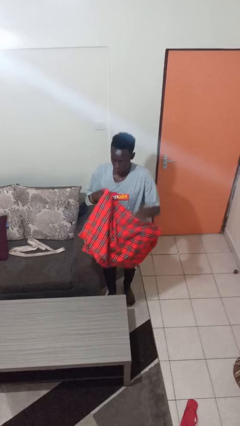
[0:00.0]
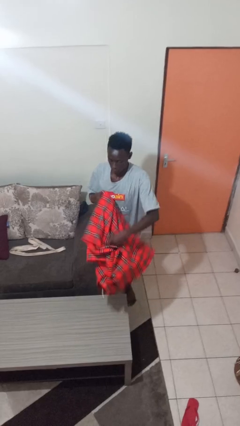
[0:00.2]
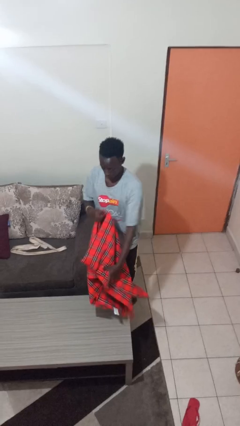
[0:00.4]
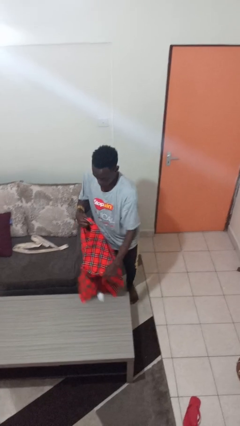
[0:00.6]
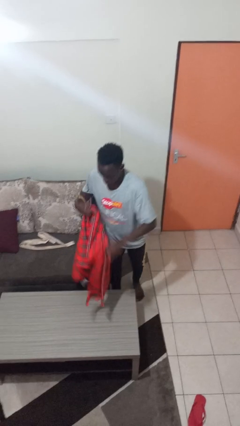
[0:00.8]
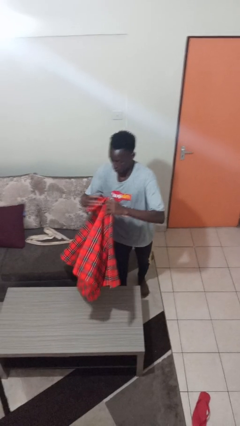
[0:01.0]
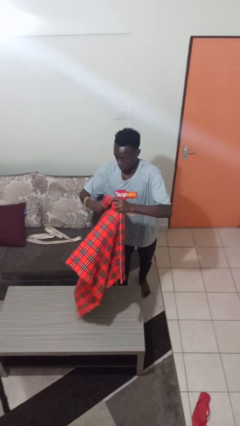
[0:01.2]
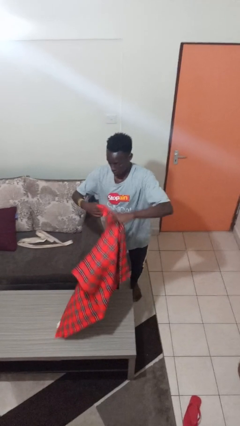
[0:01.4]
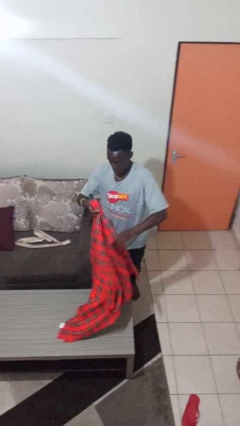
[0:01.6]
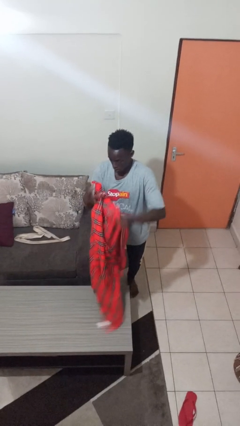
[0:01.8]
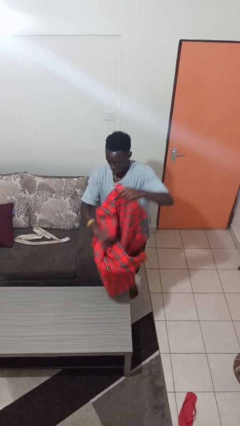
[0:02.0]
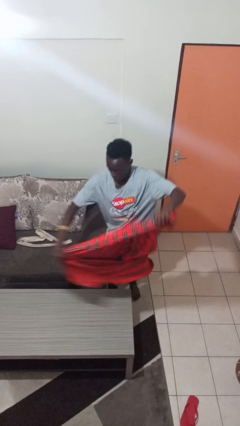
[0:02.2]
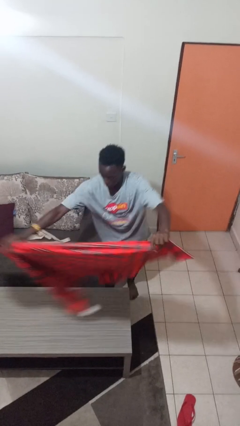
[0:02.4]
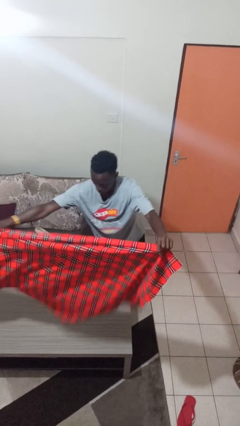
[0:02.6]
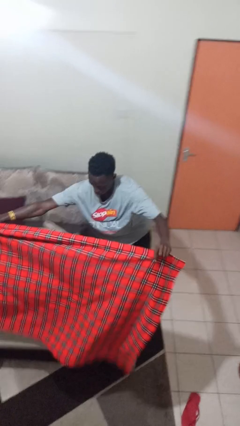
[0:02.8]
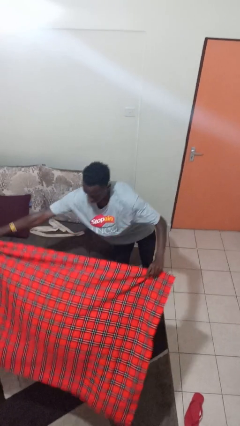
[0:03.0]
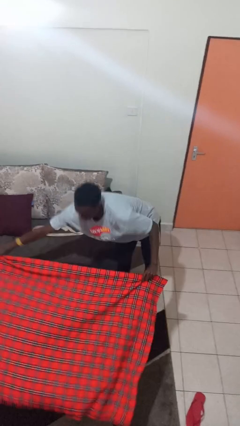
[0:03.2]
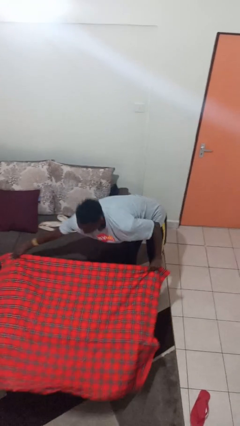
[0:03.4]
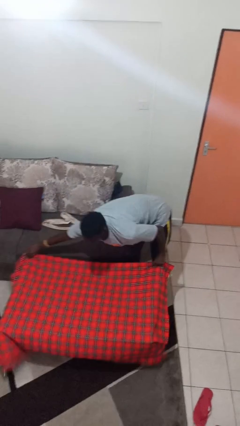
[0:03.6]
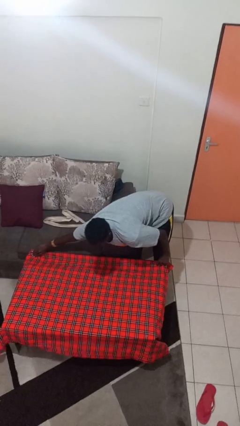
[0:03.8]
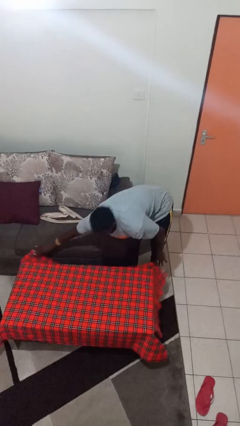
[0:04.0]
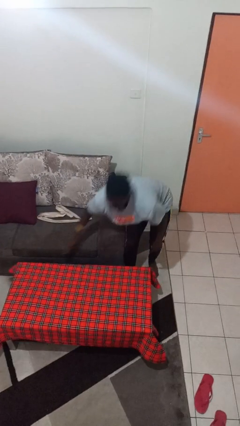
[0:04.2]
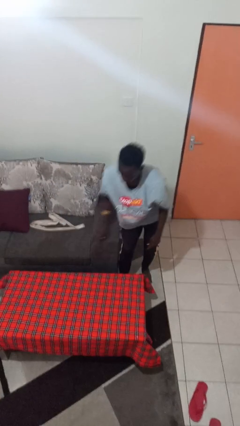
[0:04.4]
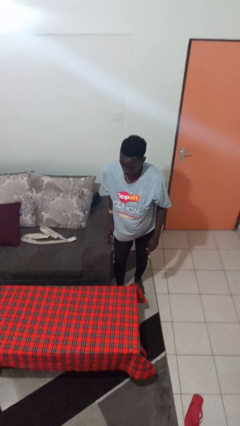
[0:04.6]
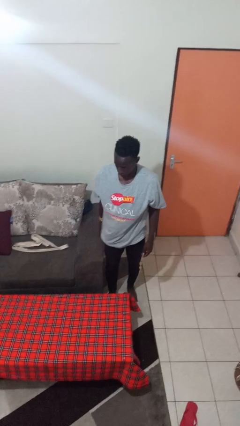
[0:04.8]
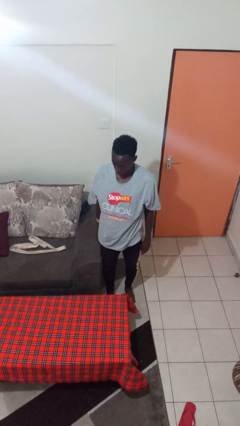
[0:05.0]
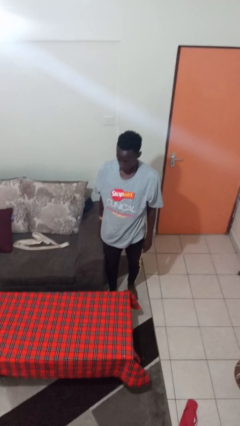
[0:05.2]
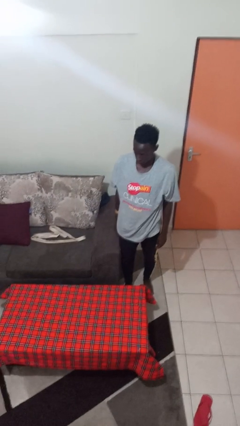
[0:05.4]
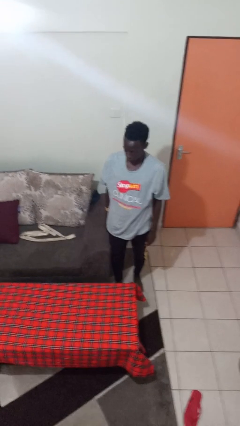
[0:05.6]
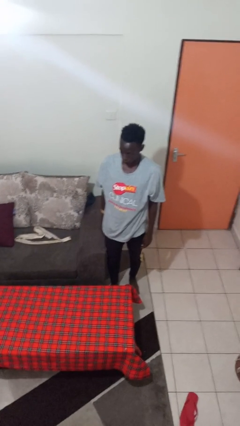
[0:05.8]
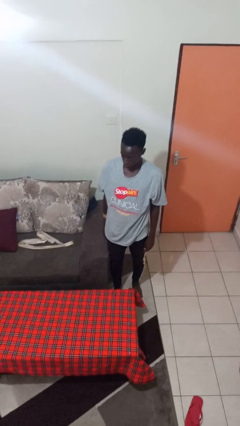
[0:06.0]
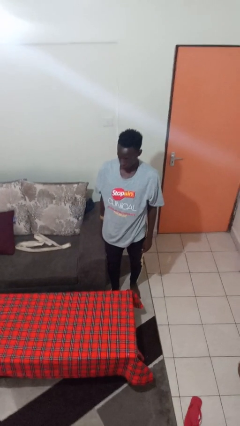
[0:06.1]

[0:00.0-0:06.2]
person spreads tablecloth

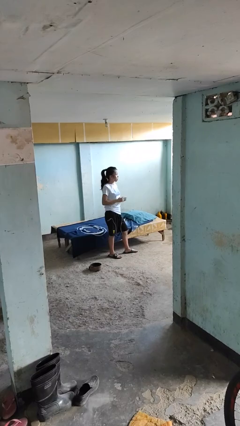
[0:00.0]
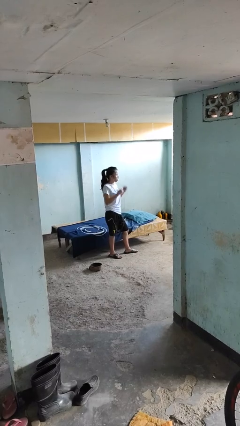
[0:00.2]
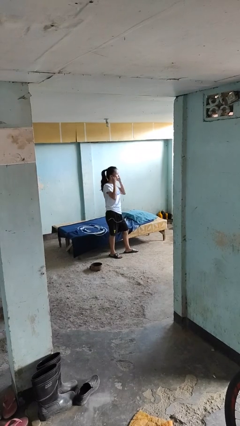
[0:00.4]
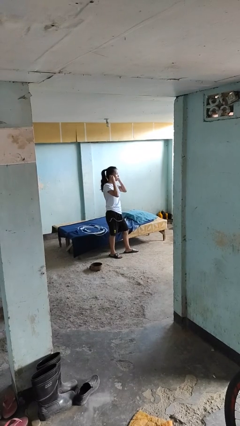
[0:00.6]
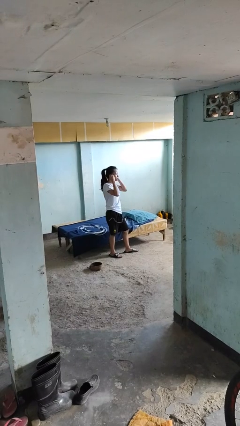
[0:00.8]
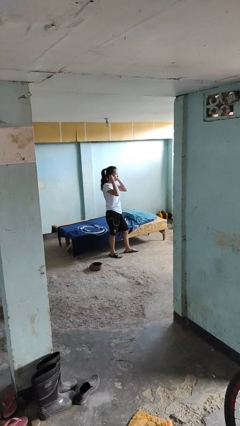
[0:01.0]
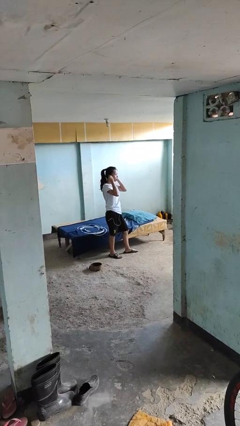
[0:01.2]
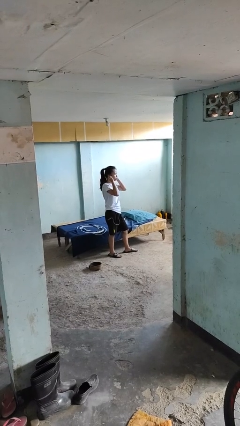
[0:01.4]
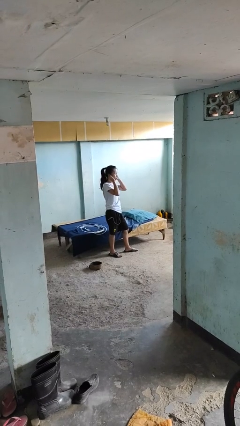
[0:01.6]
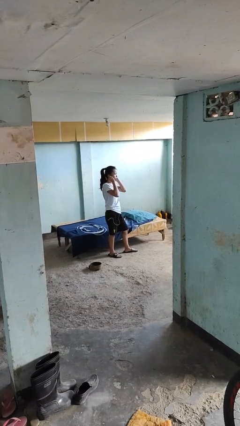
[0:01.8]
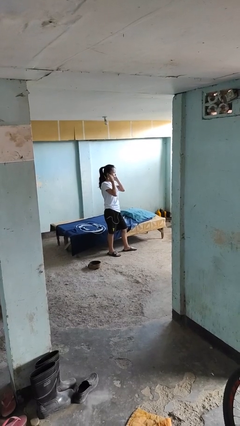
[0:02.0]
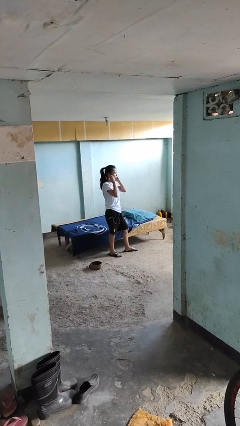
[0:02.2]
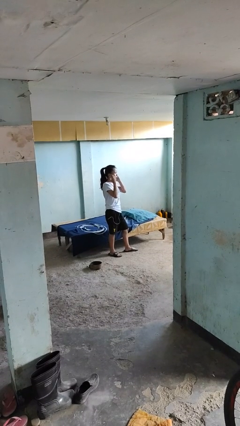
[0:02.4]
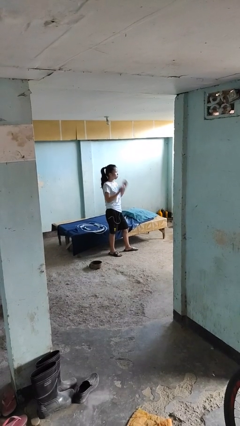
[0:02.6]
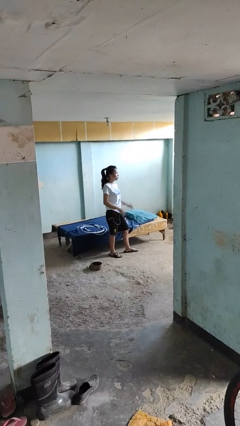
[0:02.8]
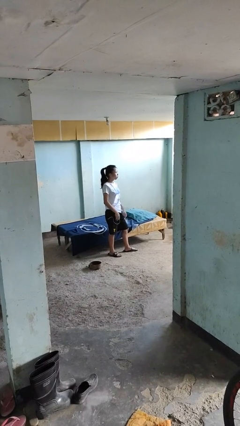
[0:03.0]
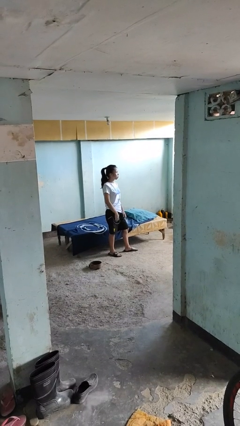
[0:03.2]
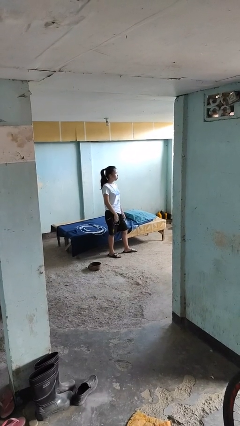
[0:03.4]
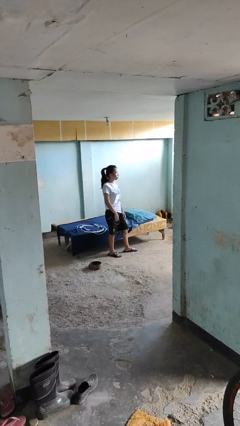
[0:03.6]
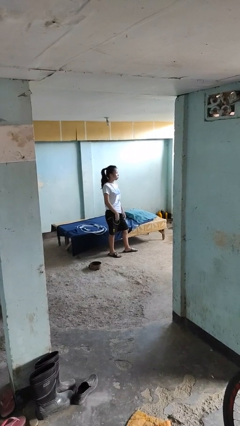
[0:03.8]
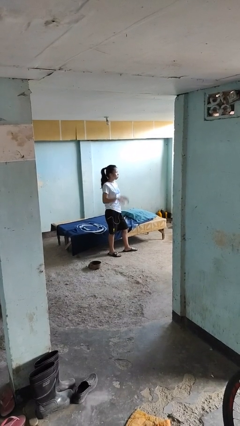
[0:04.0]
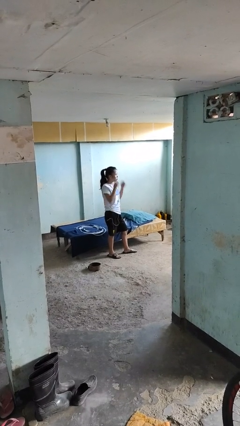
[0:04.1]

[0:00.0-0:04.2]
person puts on headphones

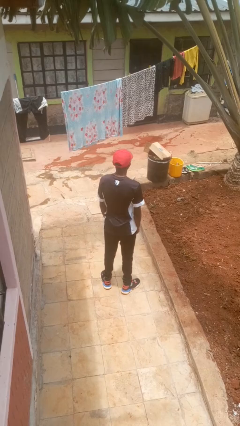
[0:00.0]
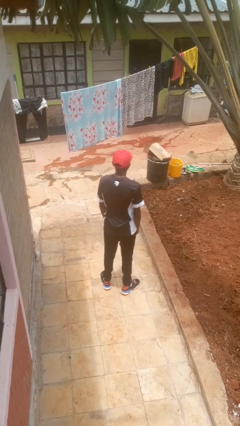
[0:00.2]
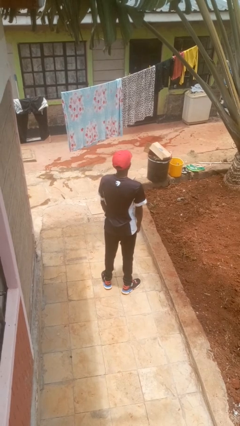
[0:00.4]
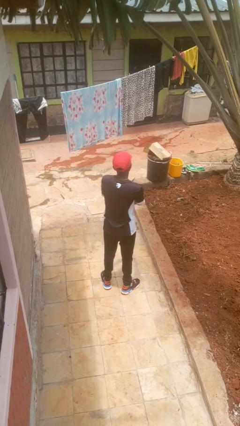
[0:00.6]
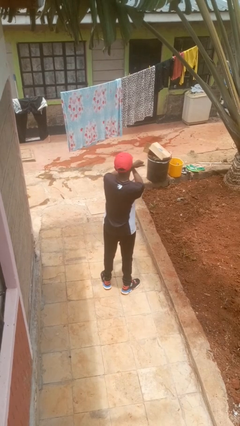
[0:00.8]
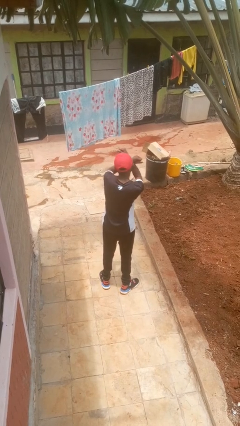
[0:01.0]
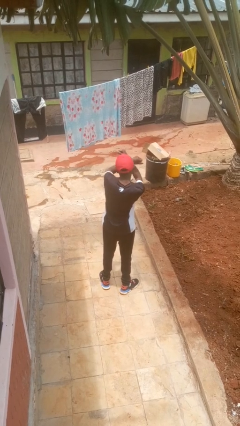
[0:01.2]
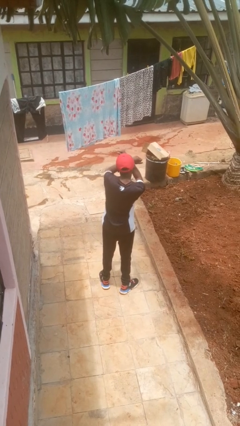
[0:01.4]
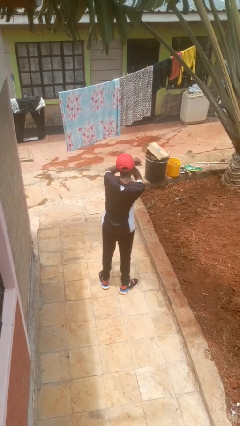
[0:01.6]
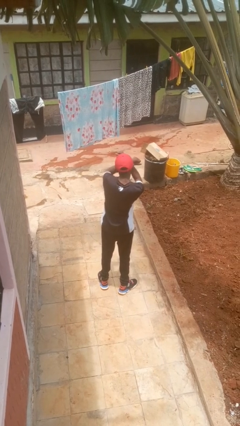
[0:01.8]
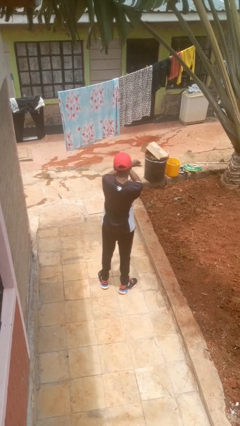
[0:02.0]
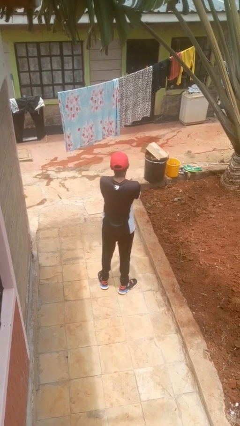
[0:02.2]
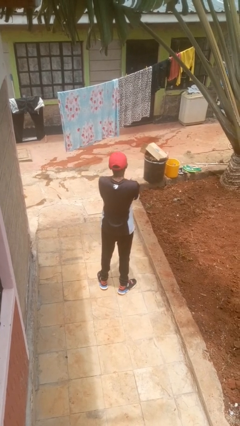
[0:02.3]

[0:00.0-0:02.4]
person gestures arms x

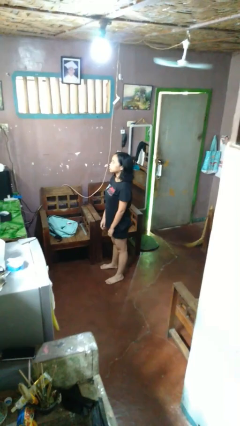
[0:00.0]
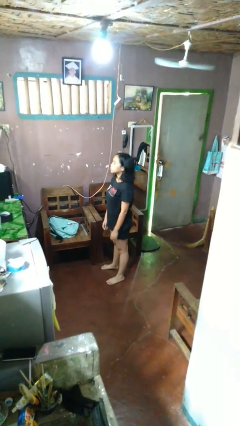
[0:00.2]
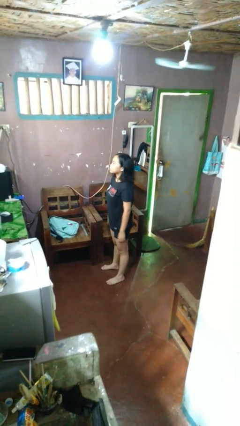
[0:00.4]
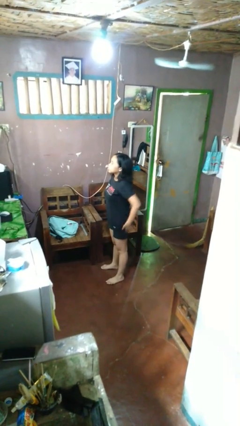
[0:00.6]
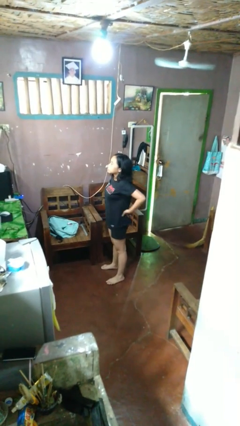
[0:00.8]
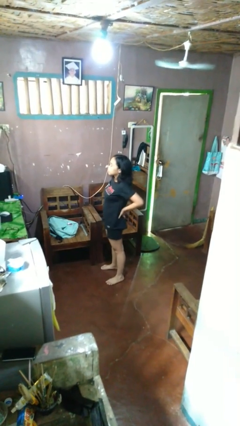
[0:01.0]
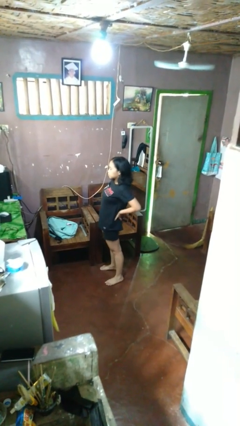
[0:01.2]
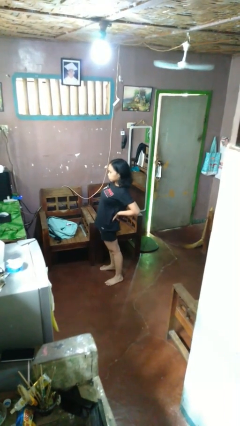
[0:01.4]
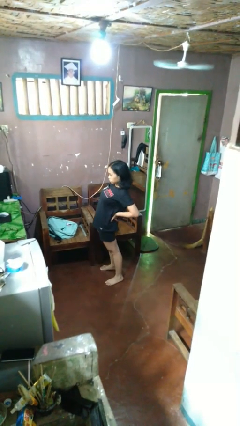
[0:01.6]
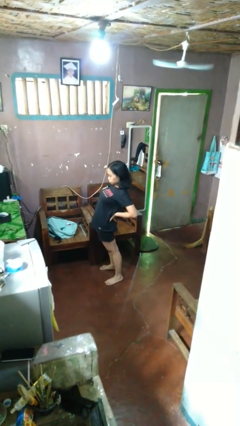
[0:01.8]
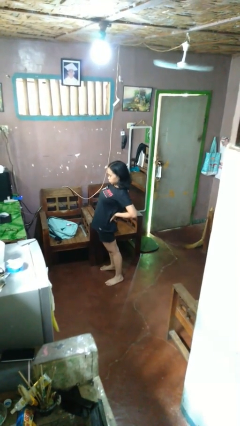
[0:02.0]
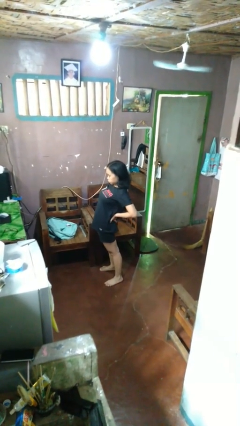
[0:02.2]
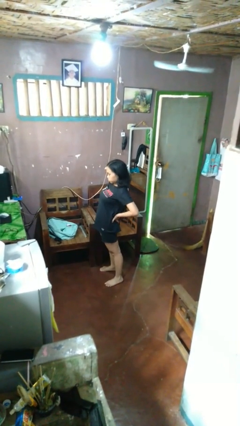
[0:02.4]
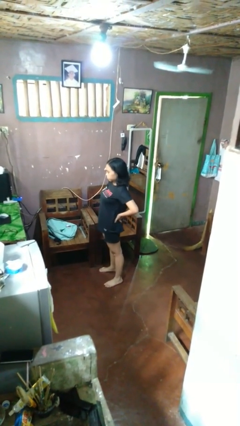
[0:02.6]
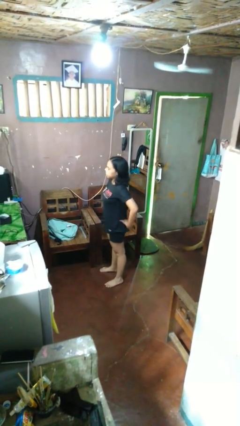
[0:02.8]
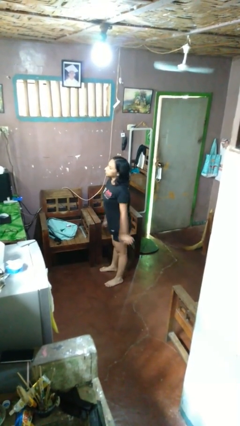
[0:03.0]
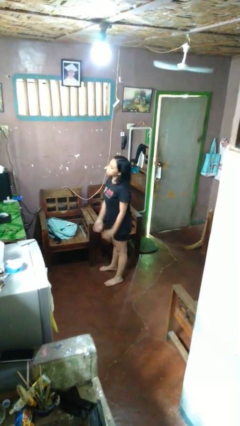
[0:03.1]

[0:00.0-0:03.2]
person stretches back

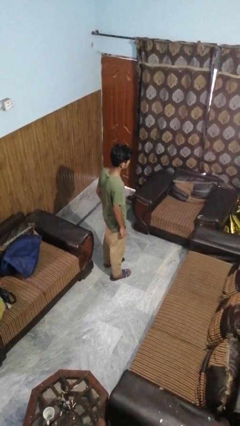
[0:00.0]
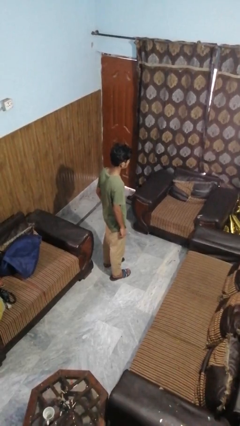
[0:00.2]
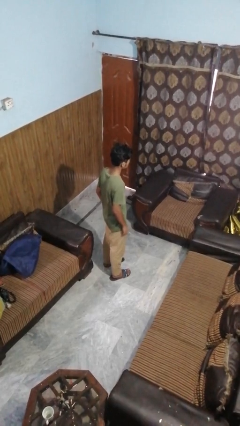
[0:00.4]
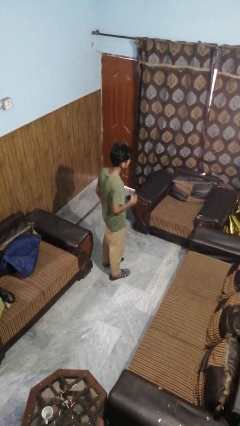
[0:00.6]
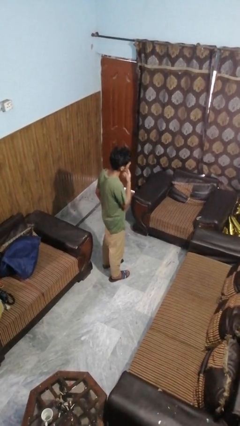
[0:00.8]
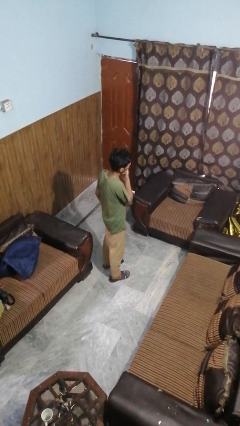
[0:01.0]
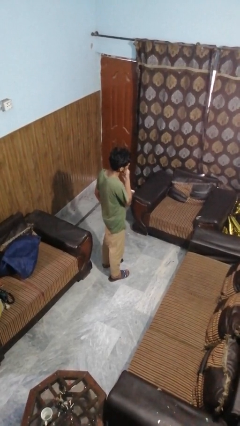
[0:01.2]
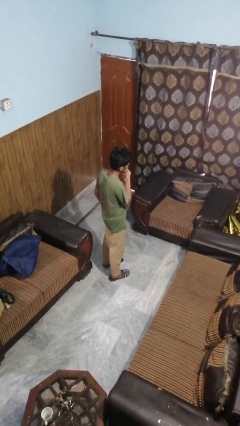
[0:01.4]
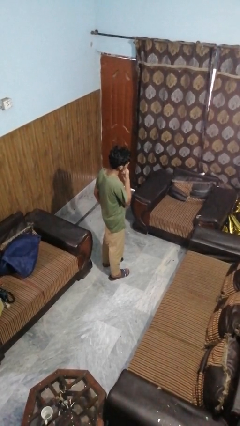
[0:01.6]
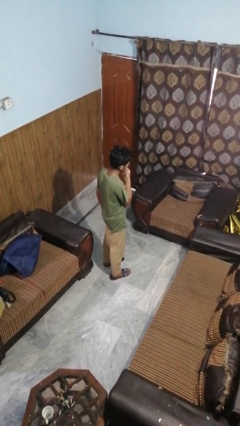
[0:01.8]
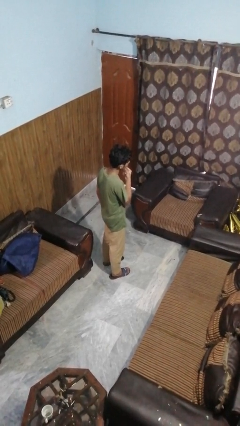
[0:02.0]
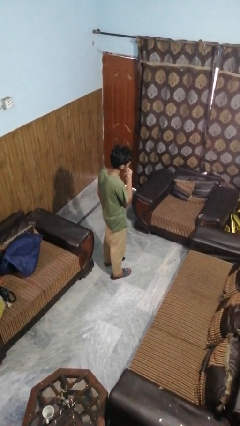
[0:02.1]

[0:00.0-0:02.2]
person strokes chin
